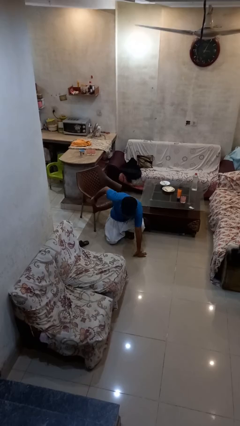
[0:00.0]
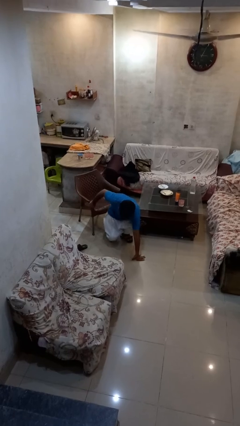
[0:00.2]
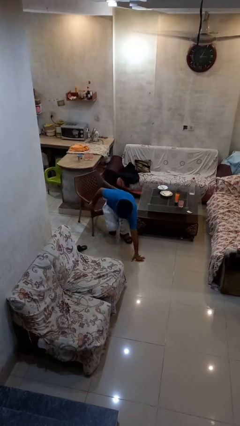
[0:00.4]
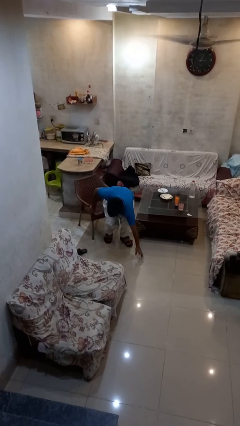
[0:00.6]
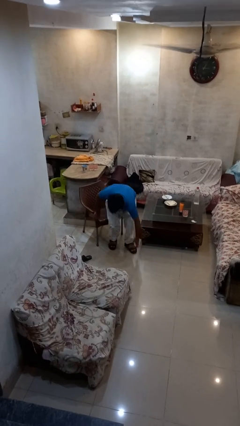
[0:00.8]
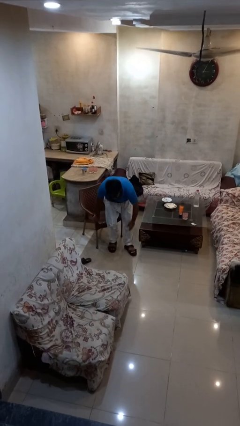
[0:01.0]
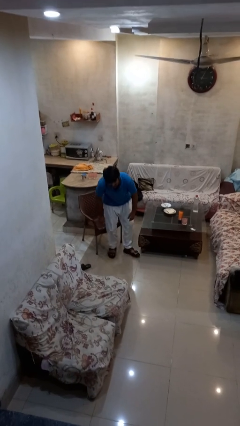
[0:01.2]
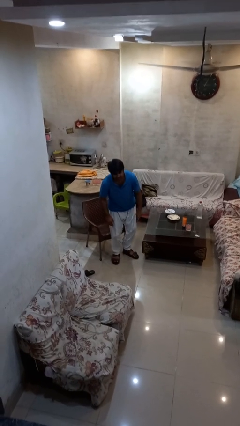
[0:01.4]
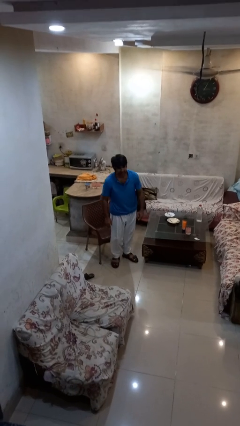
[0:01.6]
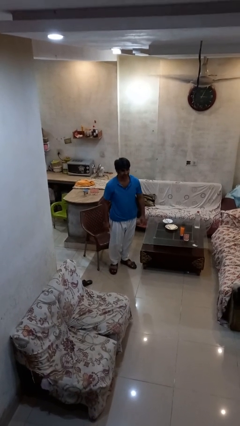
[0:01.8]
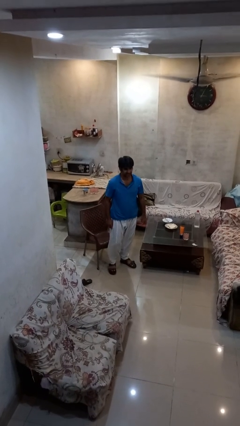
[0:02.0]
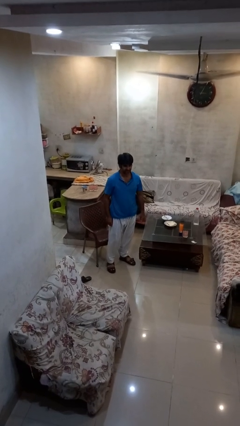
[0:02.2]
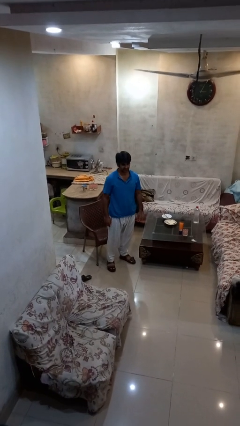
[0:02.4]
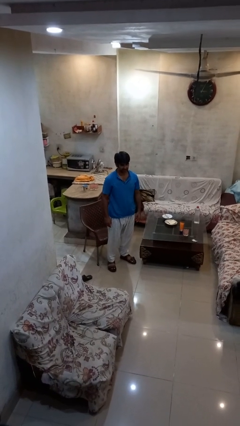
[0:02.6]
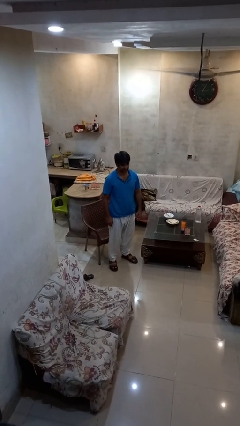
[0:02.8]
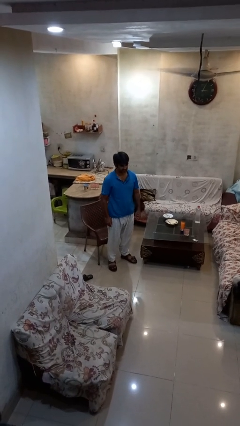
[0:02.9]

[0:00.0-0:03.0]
person stands up from floor

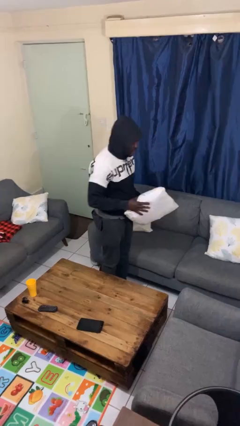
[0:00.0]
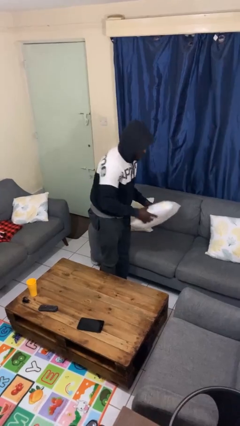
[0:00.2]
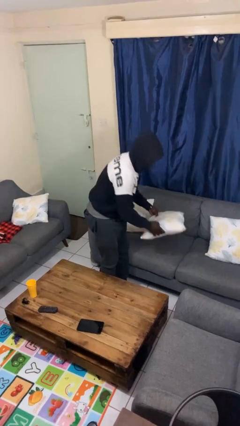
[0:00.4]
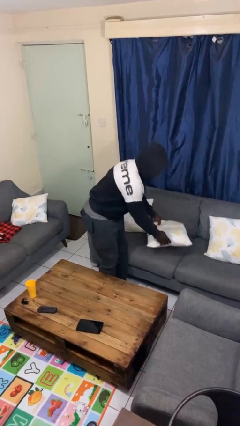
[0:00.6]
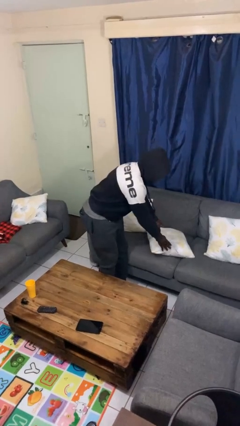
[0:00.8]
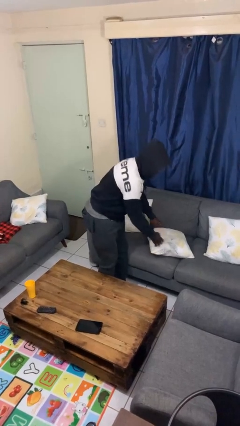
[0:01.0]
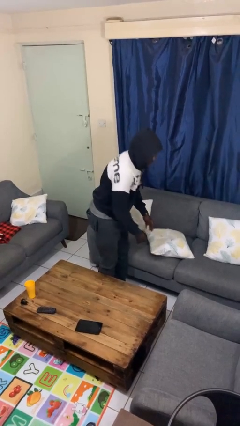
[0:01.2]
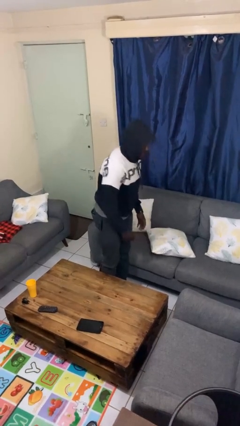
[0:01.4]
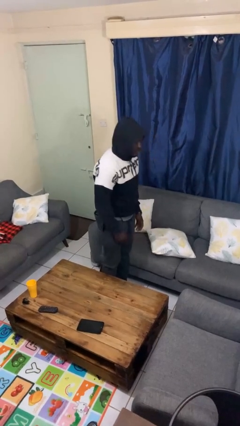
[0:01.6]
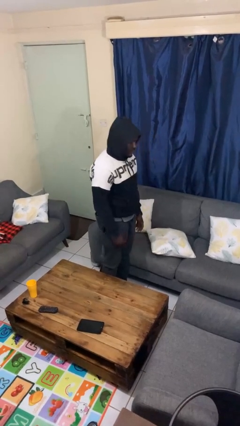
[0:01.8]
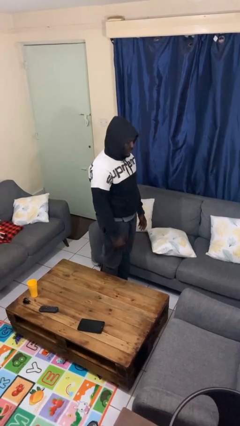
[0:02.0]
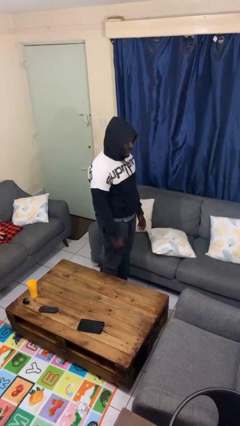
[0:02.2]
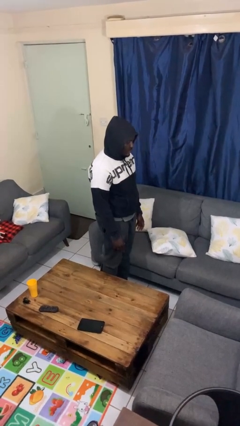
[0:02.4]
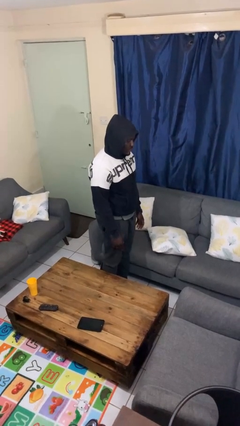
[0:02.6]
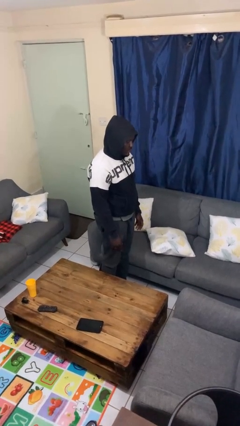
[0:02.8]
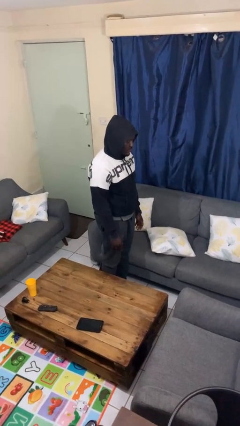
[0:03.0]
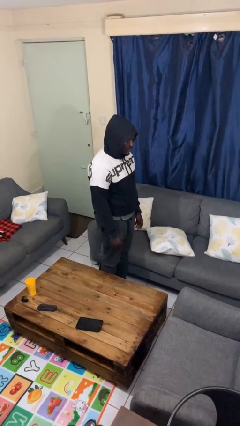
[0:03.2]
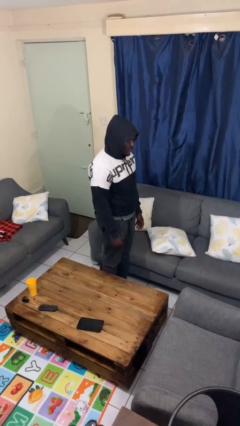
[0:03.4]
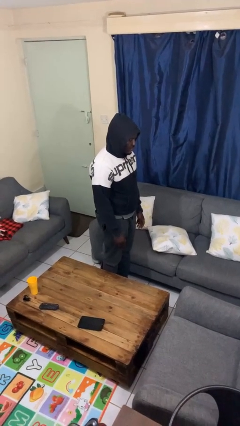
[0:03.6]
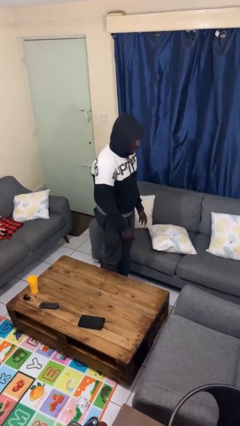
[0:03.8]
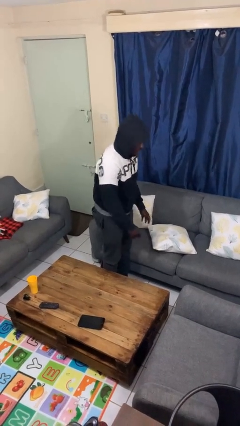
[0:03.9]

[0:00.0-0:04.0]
person puts down object on couch

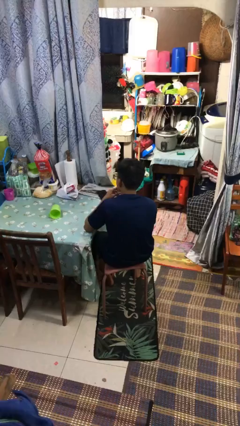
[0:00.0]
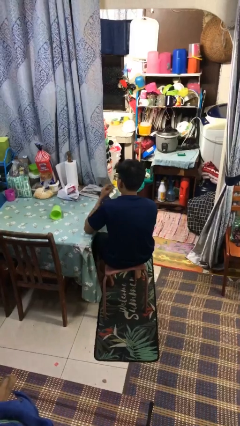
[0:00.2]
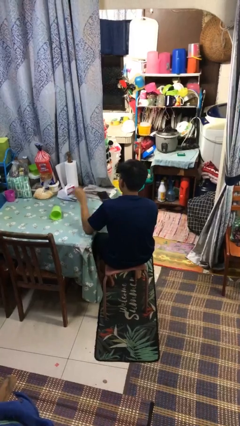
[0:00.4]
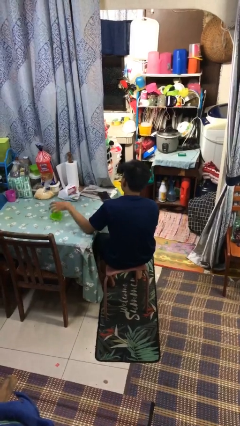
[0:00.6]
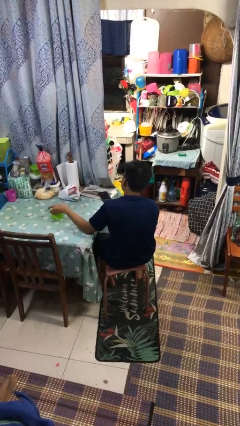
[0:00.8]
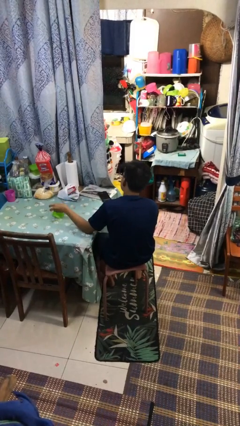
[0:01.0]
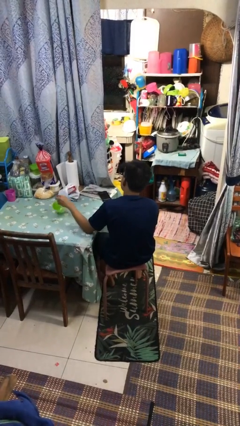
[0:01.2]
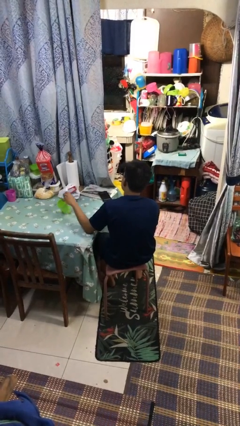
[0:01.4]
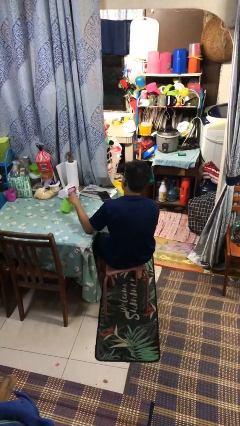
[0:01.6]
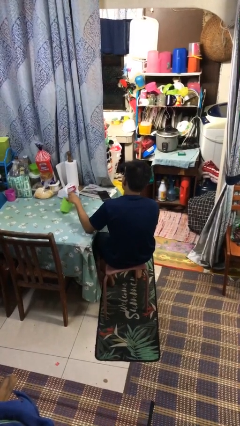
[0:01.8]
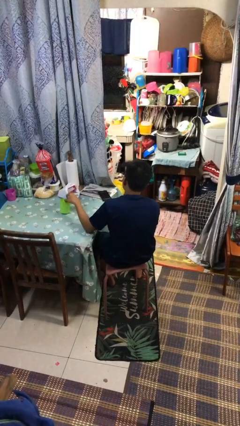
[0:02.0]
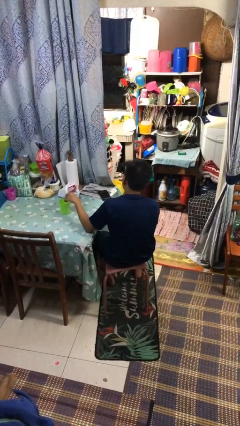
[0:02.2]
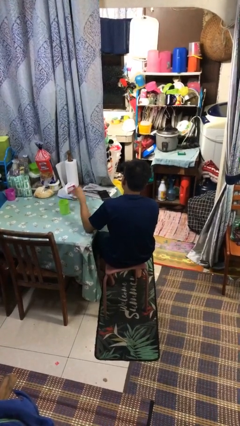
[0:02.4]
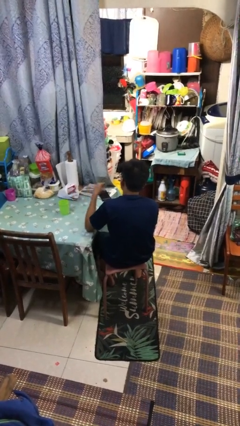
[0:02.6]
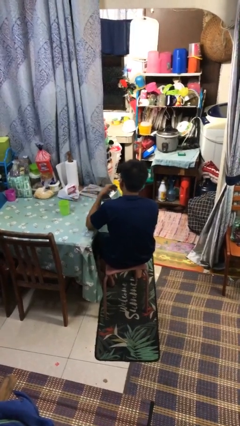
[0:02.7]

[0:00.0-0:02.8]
person sets upright glass

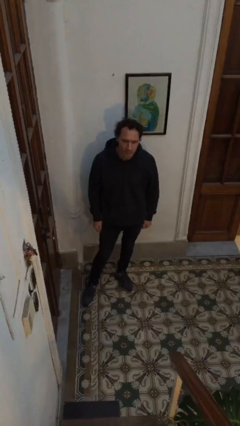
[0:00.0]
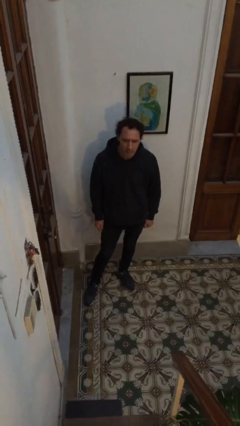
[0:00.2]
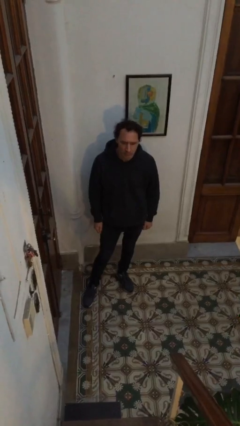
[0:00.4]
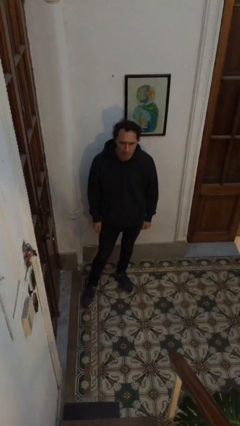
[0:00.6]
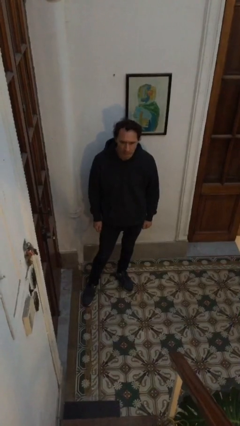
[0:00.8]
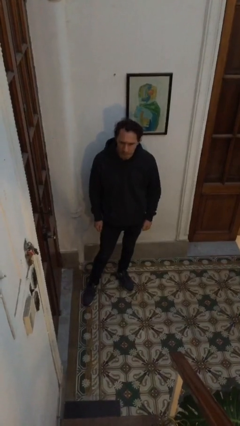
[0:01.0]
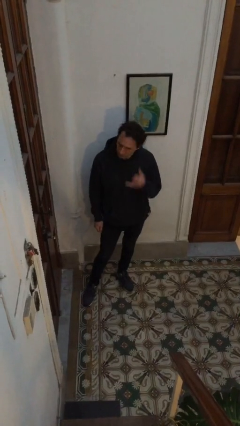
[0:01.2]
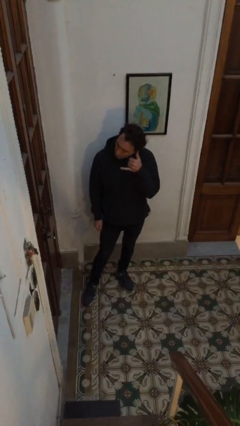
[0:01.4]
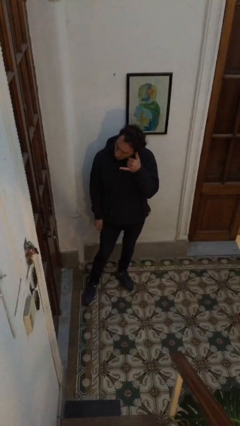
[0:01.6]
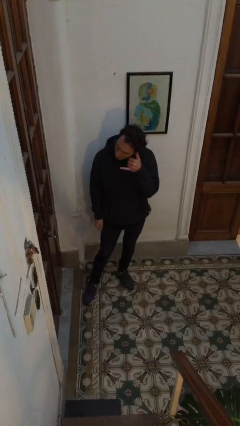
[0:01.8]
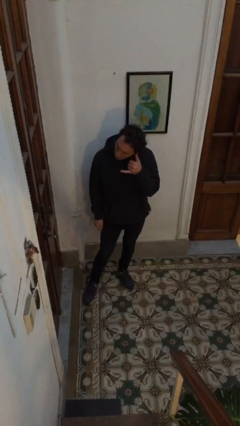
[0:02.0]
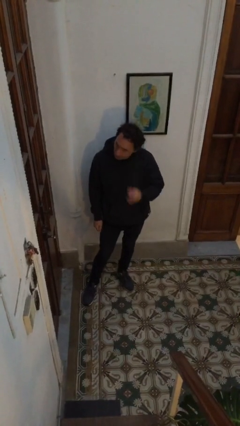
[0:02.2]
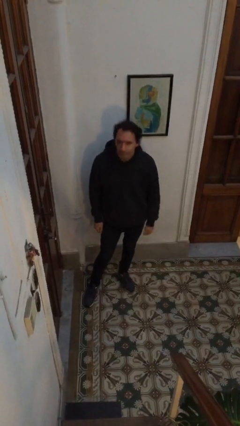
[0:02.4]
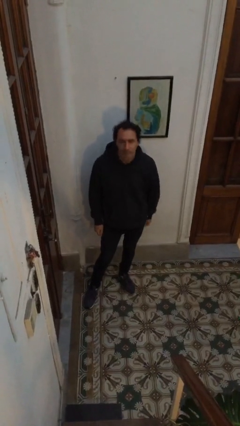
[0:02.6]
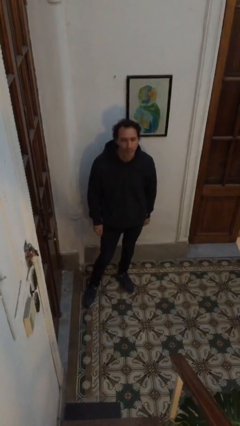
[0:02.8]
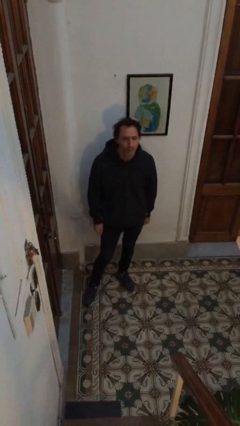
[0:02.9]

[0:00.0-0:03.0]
person gestures call me

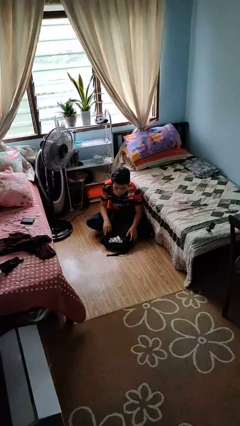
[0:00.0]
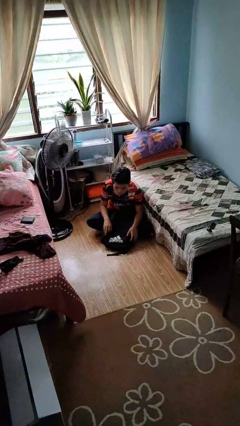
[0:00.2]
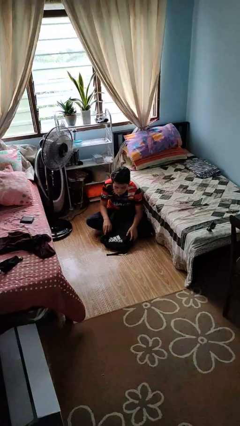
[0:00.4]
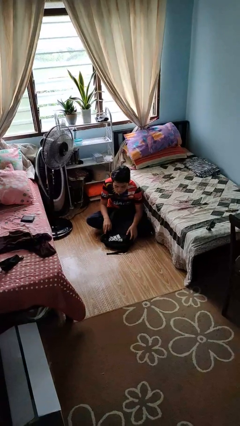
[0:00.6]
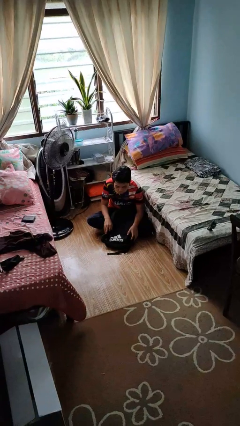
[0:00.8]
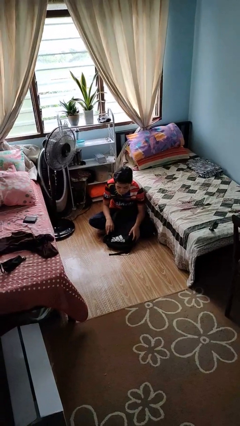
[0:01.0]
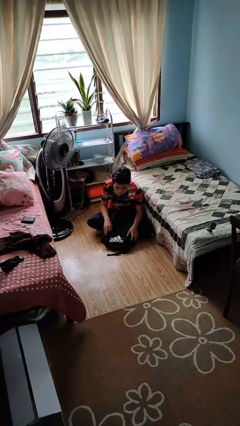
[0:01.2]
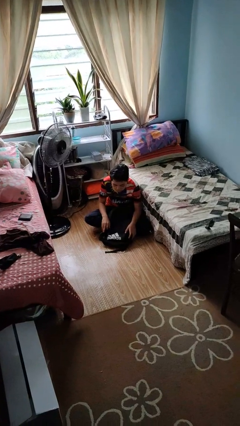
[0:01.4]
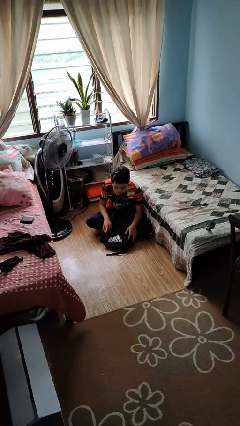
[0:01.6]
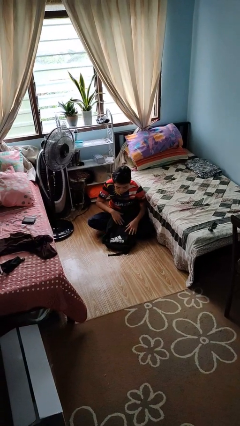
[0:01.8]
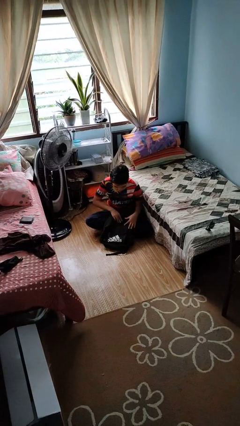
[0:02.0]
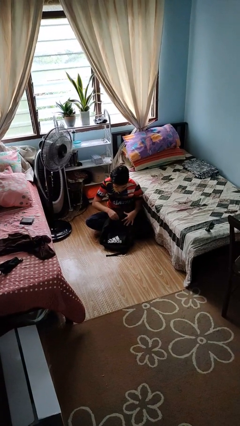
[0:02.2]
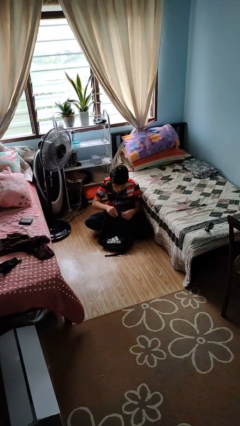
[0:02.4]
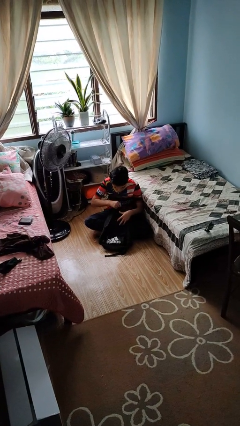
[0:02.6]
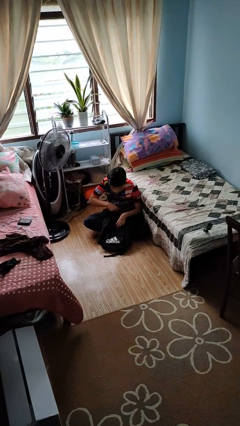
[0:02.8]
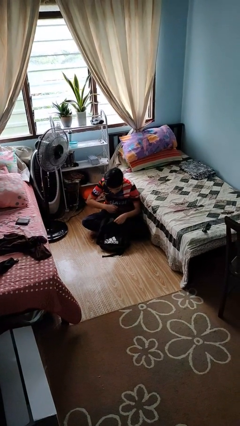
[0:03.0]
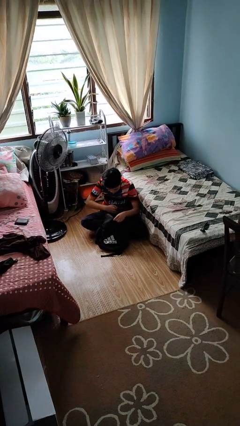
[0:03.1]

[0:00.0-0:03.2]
person searches in backpack

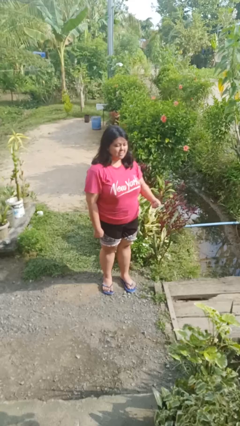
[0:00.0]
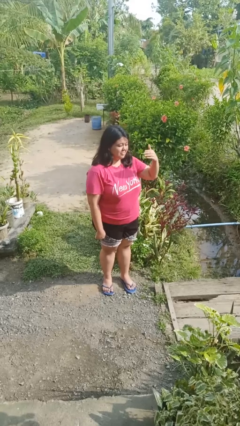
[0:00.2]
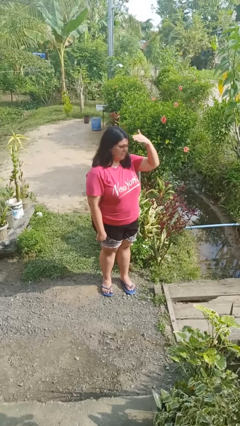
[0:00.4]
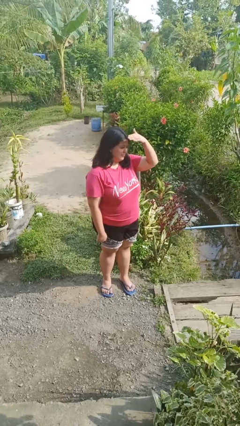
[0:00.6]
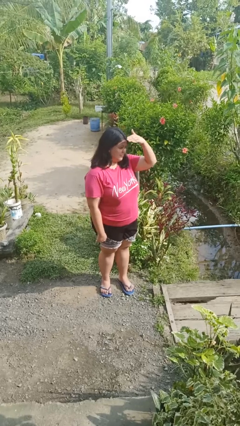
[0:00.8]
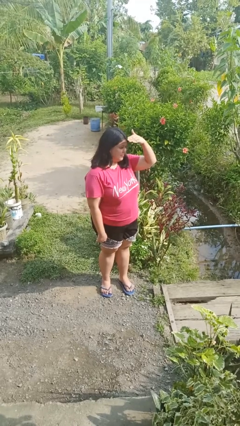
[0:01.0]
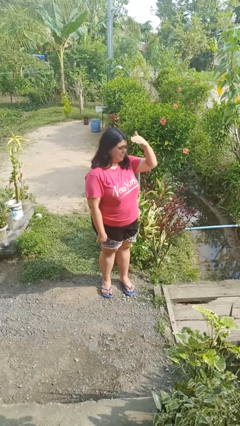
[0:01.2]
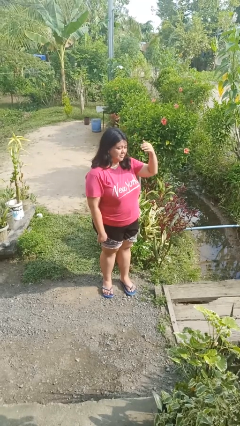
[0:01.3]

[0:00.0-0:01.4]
person shades eyes

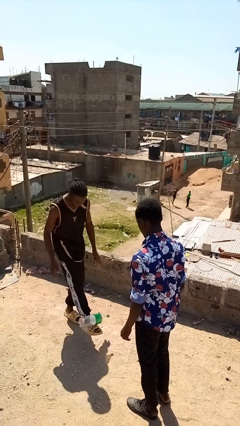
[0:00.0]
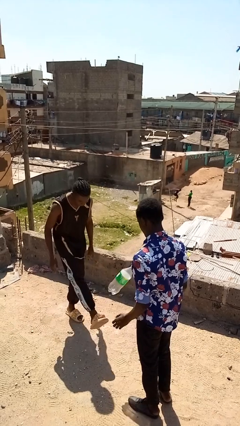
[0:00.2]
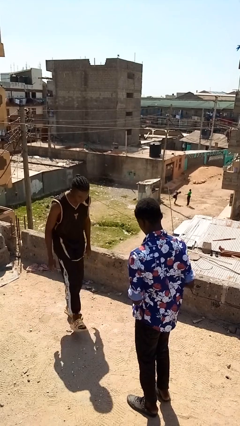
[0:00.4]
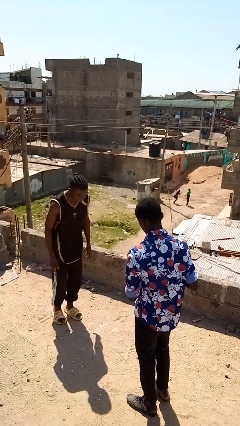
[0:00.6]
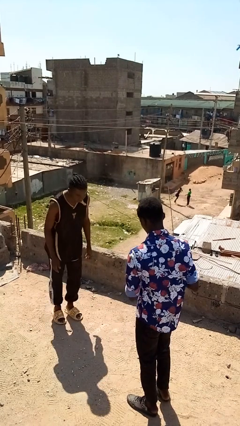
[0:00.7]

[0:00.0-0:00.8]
person kicks object to person
